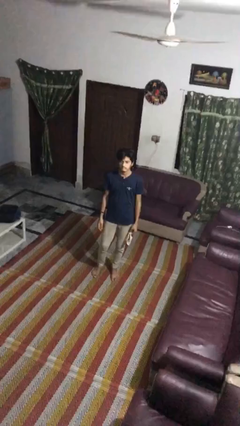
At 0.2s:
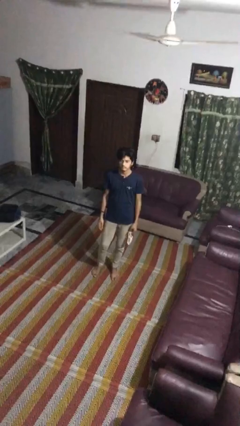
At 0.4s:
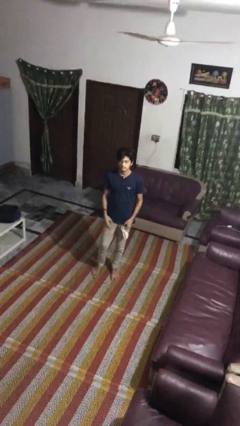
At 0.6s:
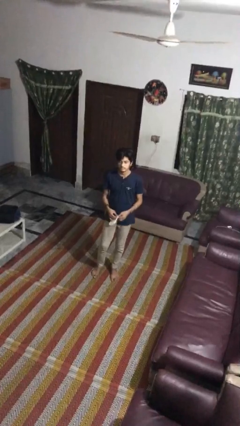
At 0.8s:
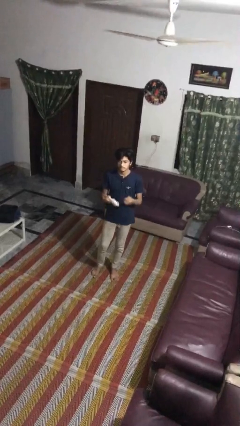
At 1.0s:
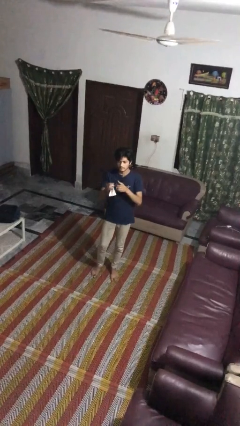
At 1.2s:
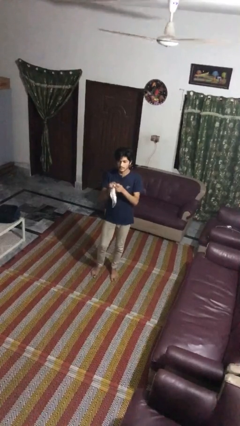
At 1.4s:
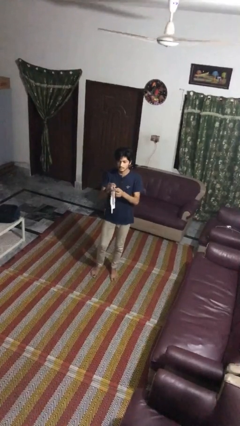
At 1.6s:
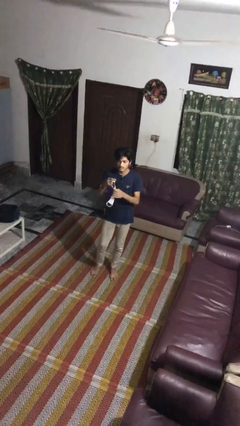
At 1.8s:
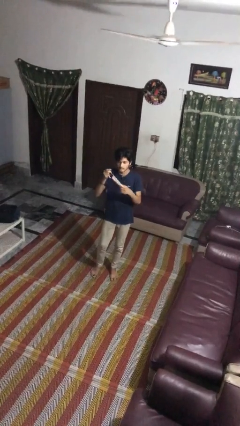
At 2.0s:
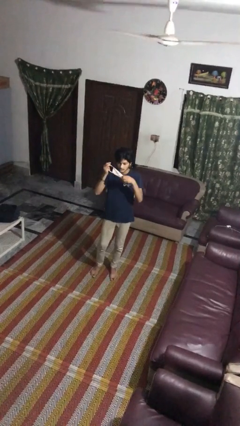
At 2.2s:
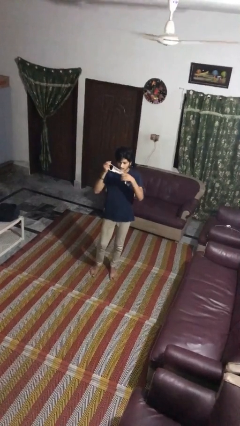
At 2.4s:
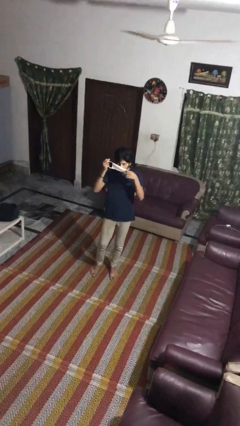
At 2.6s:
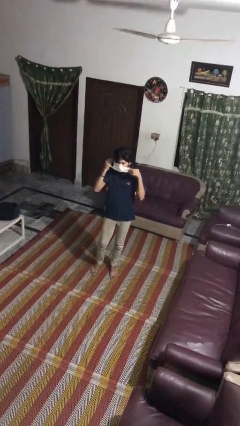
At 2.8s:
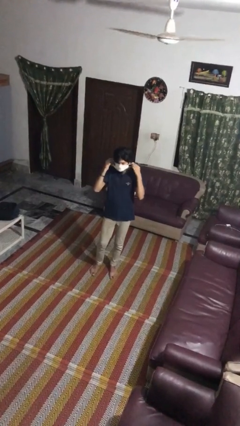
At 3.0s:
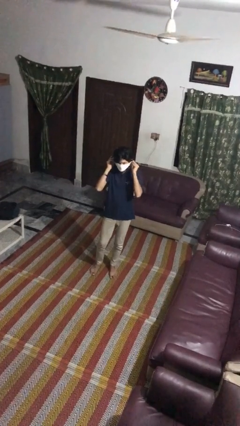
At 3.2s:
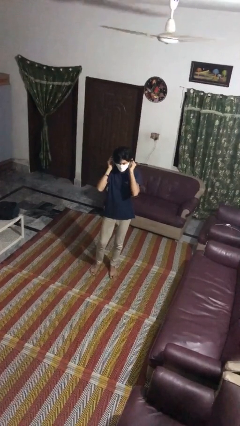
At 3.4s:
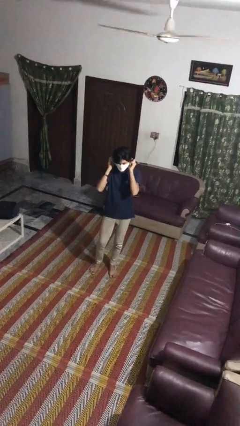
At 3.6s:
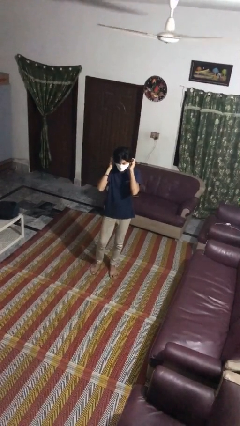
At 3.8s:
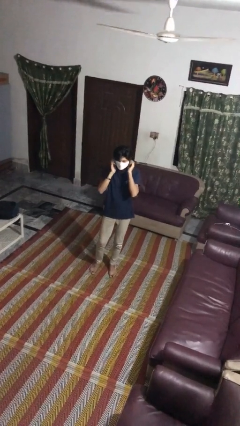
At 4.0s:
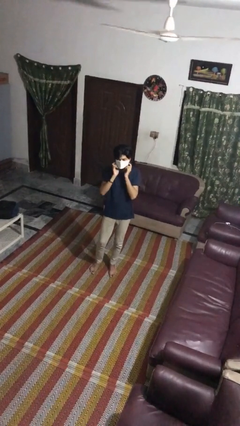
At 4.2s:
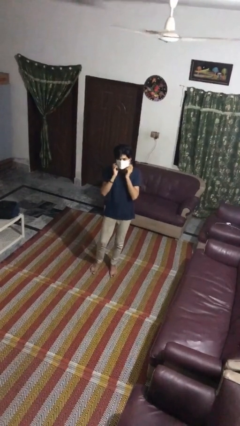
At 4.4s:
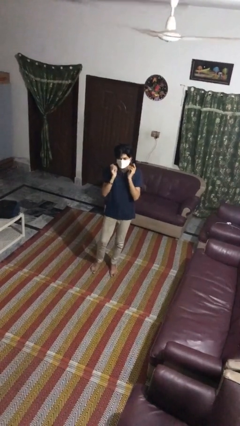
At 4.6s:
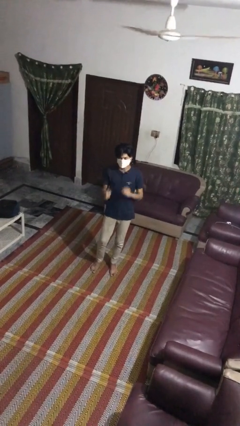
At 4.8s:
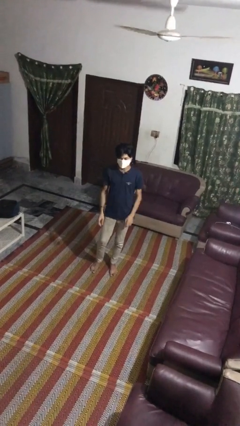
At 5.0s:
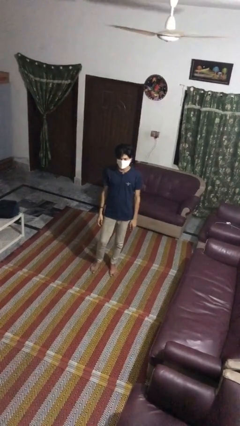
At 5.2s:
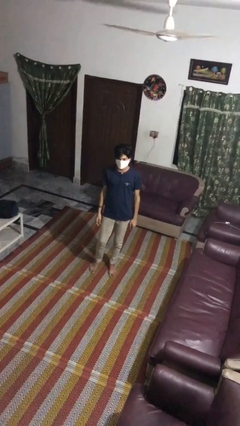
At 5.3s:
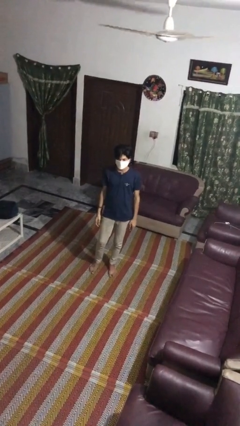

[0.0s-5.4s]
person puts on facemask

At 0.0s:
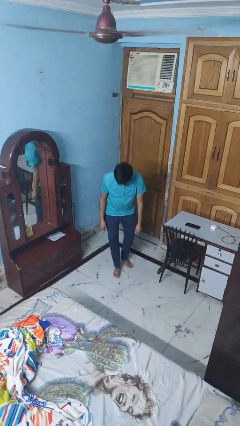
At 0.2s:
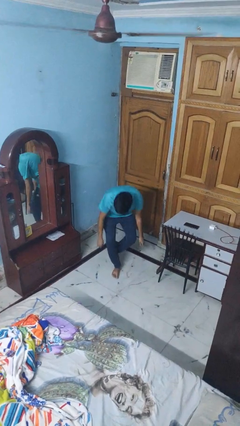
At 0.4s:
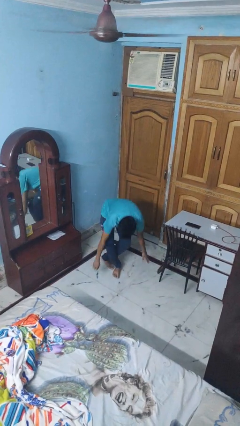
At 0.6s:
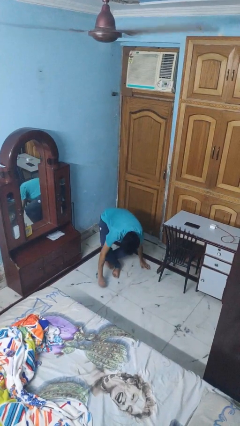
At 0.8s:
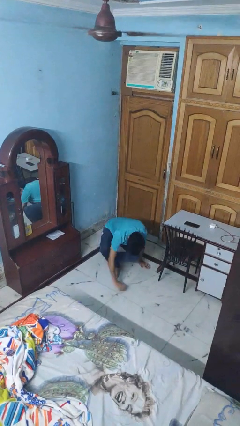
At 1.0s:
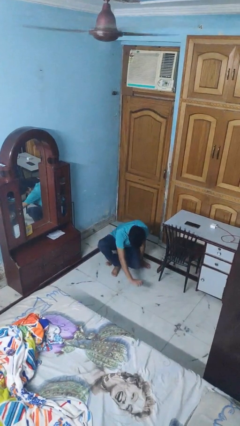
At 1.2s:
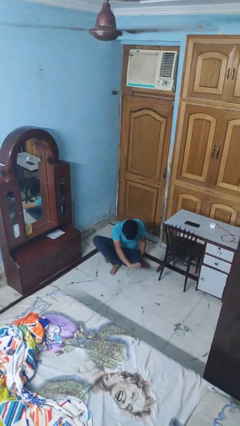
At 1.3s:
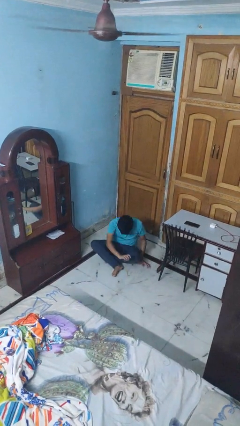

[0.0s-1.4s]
person sits crisscross

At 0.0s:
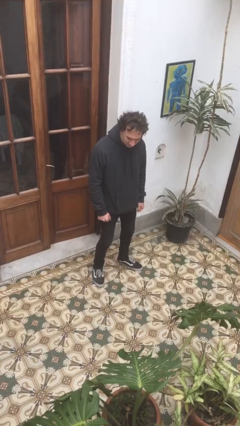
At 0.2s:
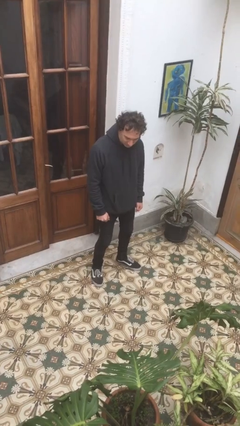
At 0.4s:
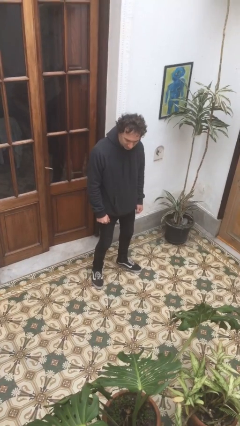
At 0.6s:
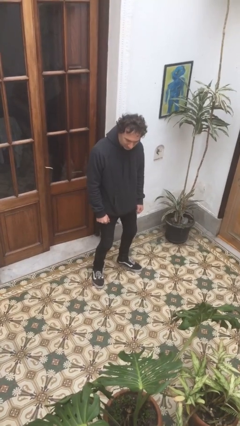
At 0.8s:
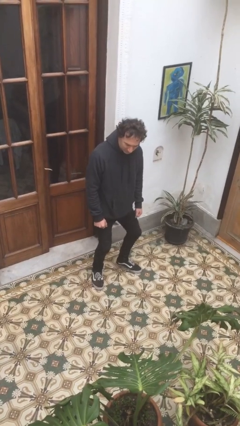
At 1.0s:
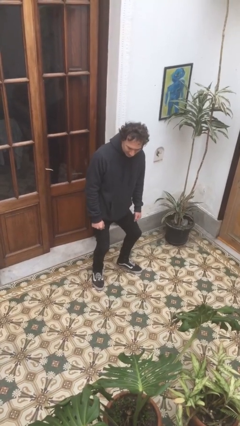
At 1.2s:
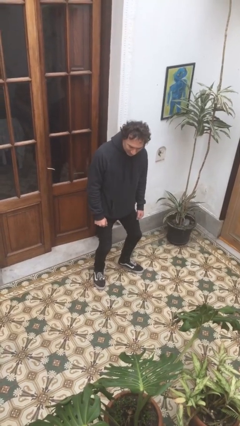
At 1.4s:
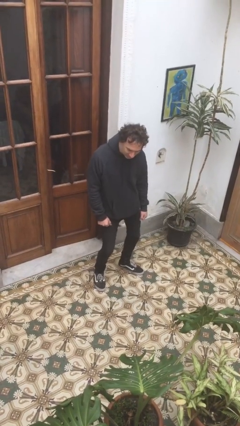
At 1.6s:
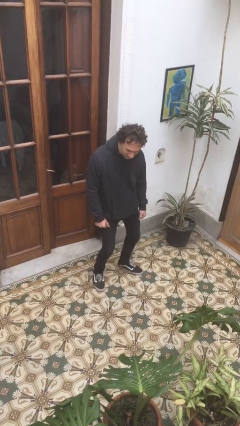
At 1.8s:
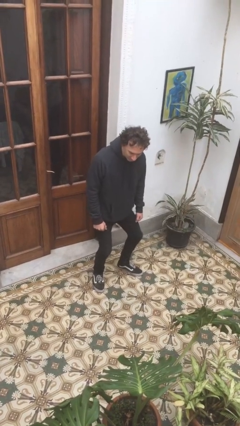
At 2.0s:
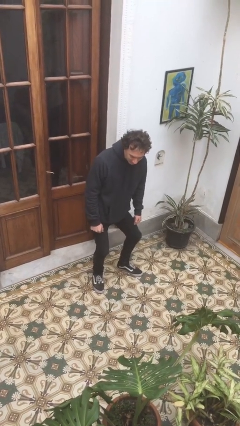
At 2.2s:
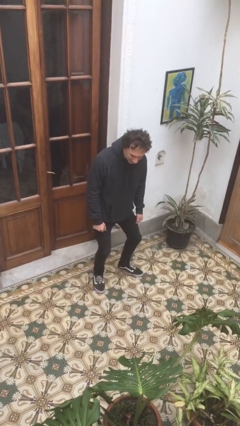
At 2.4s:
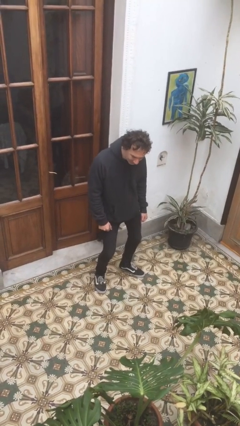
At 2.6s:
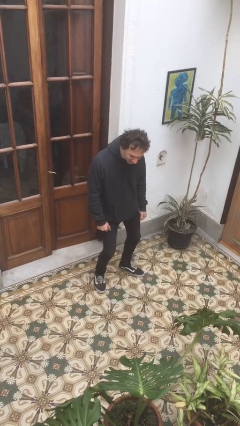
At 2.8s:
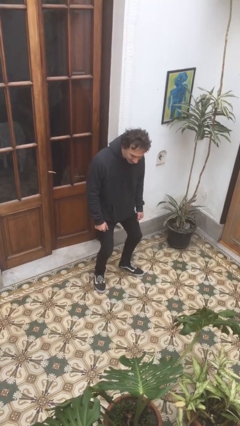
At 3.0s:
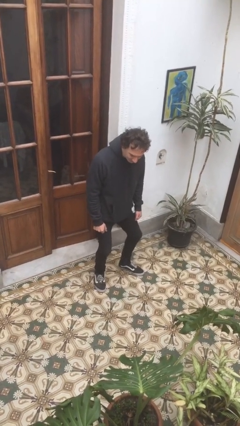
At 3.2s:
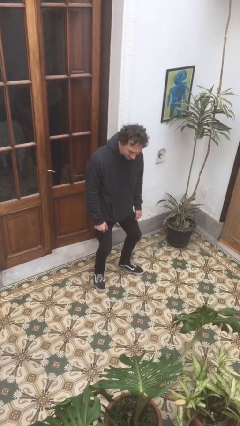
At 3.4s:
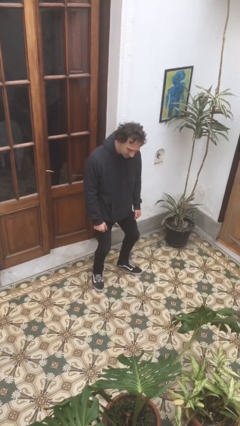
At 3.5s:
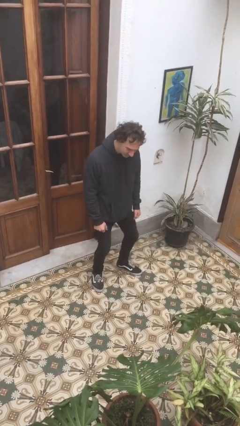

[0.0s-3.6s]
person wiggles hips

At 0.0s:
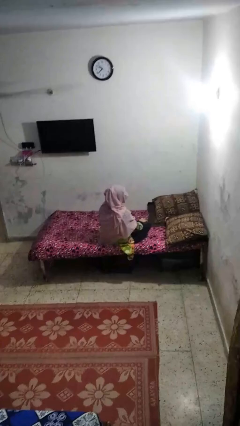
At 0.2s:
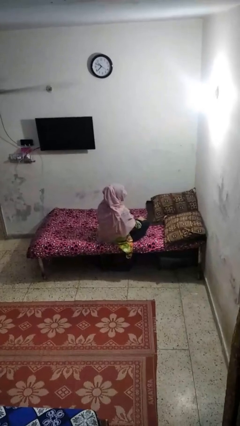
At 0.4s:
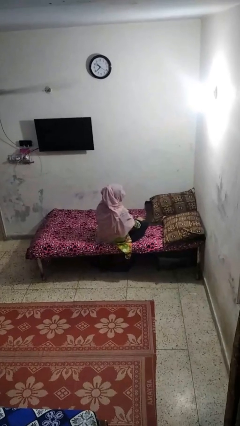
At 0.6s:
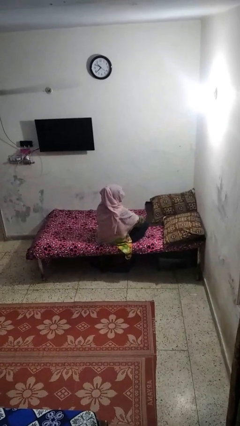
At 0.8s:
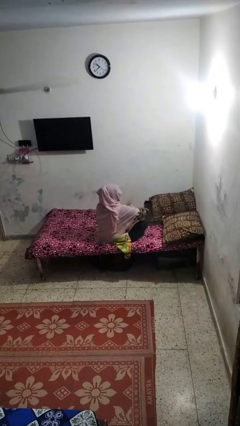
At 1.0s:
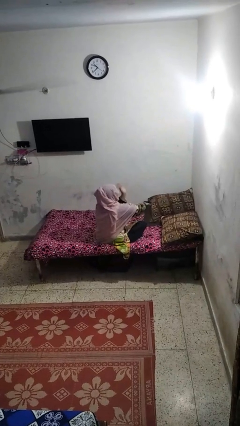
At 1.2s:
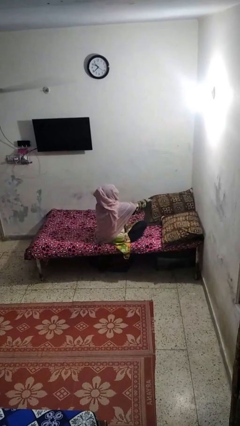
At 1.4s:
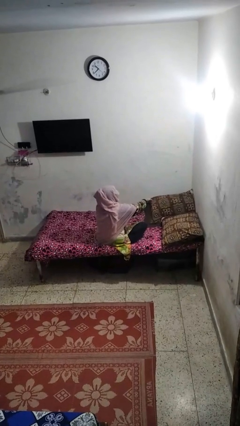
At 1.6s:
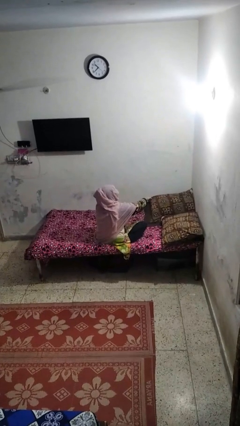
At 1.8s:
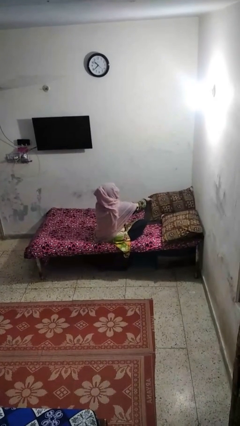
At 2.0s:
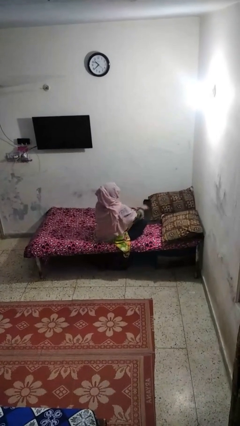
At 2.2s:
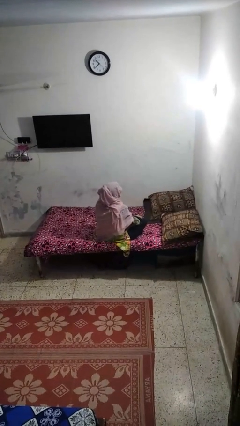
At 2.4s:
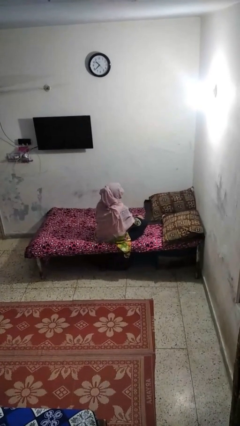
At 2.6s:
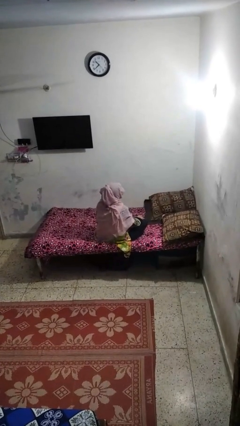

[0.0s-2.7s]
person swats bug

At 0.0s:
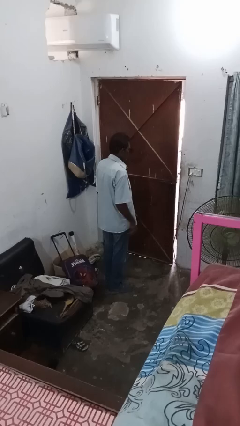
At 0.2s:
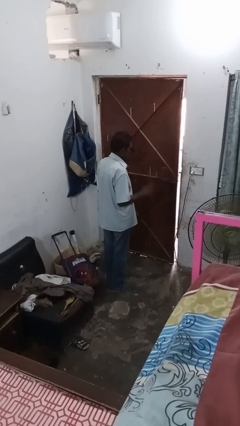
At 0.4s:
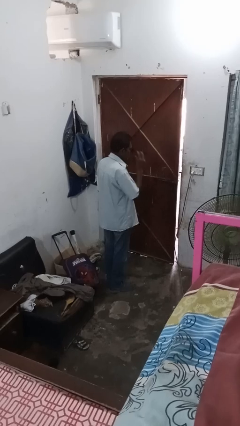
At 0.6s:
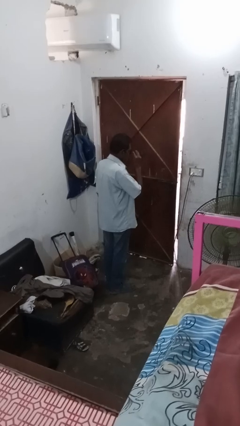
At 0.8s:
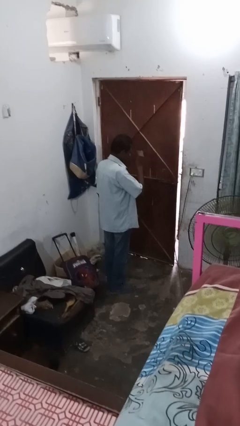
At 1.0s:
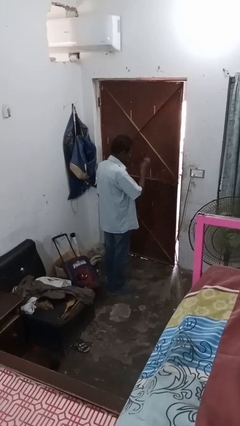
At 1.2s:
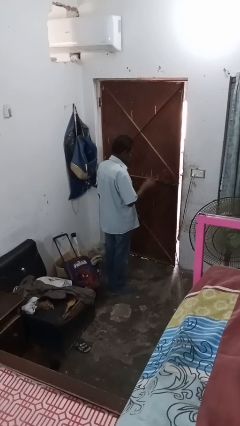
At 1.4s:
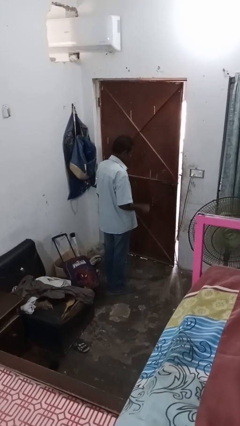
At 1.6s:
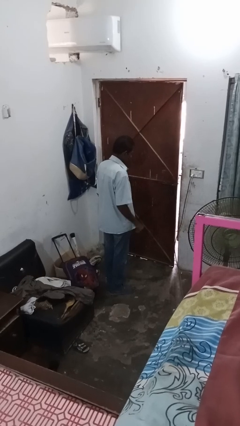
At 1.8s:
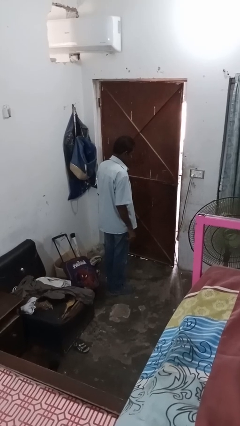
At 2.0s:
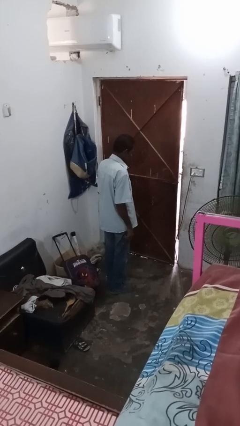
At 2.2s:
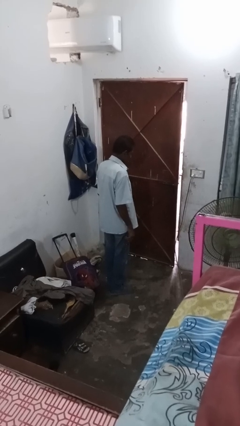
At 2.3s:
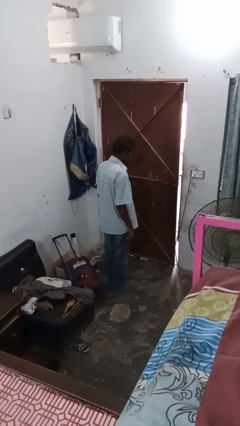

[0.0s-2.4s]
person takes off sunglasses

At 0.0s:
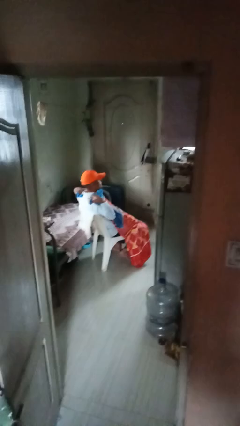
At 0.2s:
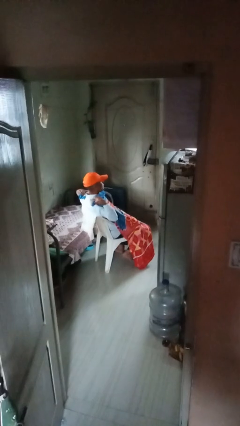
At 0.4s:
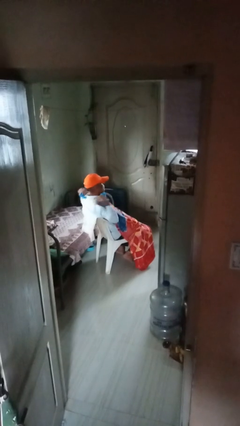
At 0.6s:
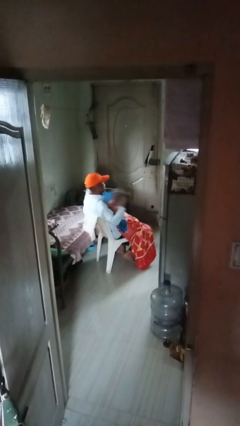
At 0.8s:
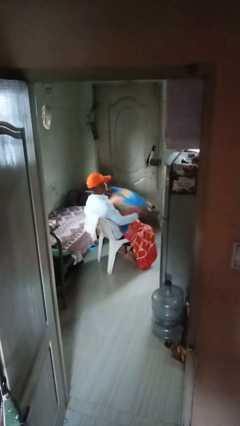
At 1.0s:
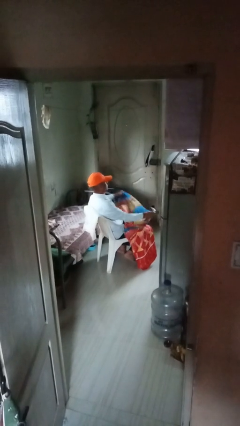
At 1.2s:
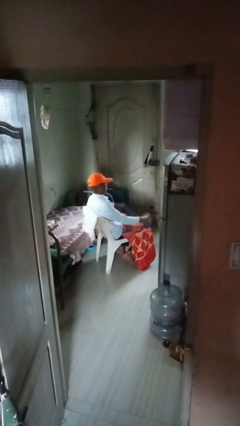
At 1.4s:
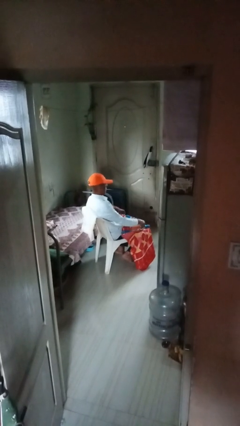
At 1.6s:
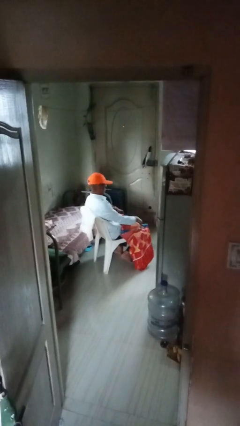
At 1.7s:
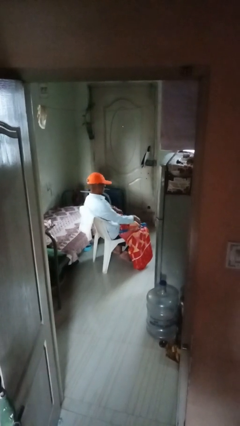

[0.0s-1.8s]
person uncovers with blanket

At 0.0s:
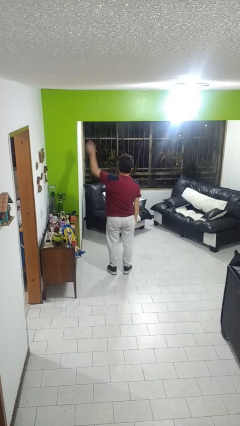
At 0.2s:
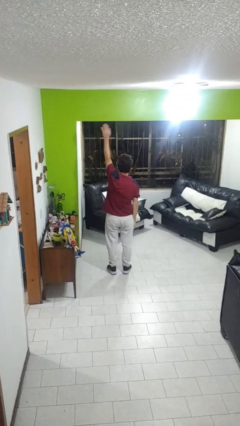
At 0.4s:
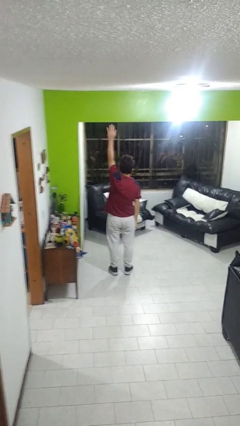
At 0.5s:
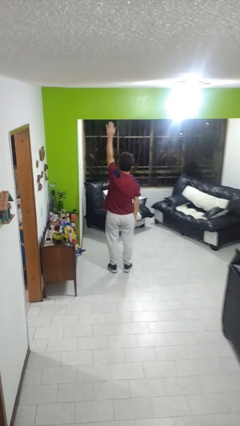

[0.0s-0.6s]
person gestures raise hand
